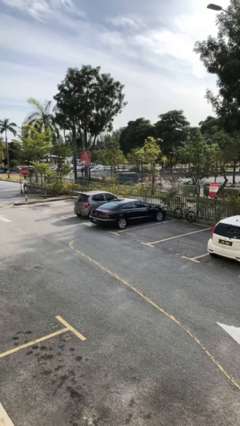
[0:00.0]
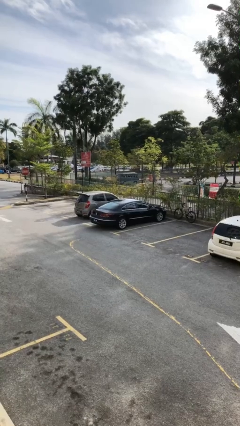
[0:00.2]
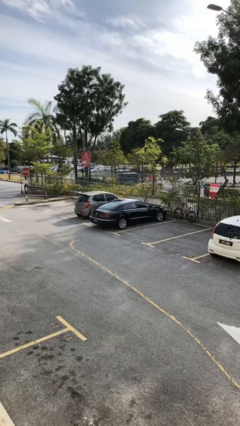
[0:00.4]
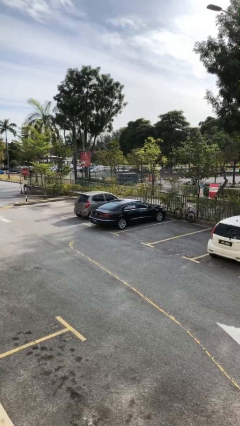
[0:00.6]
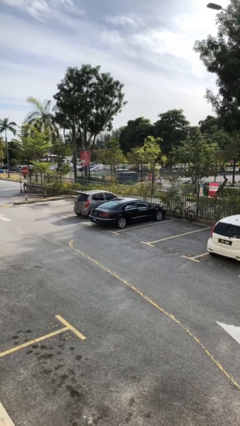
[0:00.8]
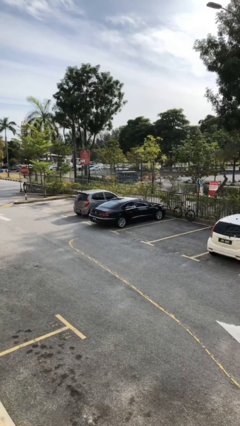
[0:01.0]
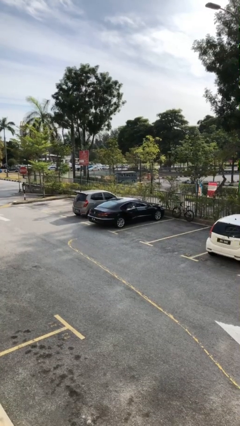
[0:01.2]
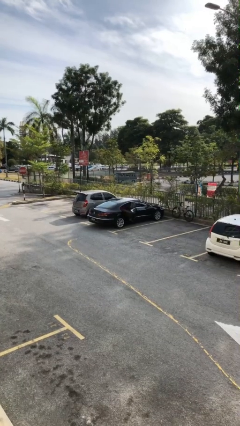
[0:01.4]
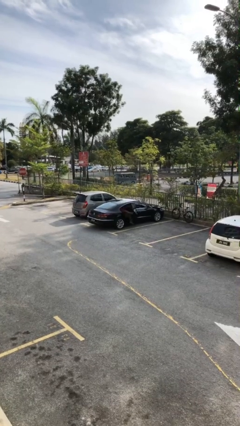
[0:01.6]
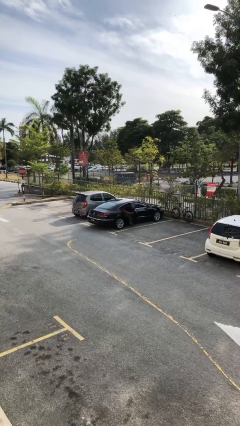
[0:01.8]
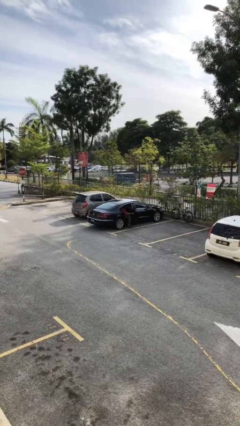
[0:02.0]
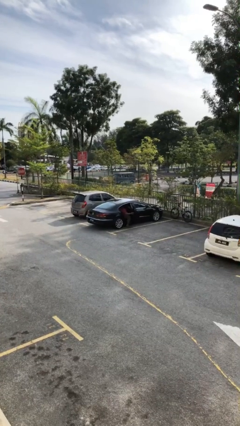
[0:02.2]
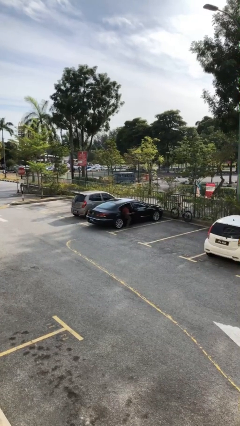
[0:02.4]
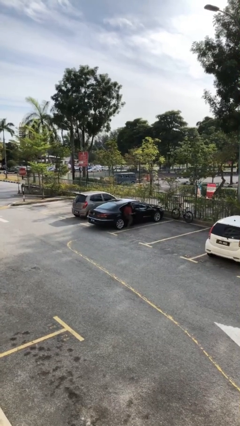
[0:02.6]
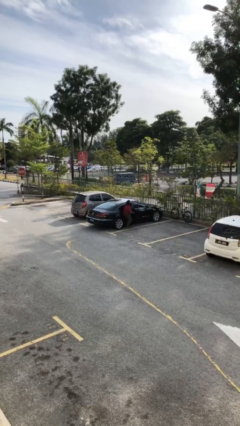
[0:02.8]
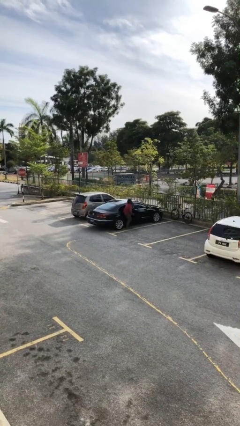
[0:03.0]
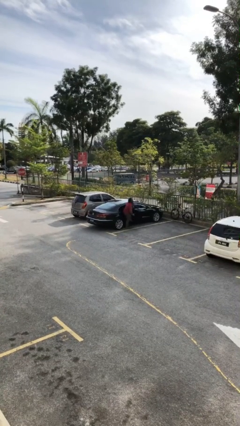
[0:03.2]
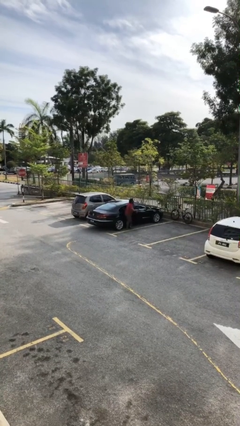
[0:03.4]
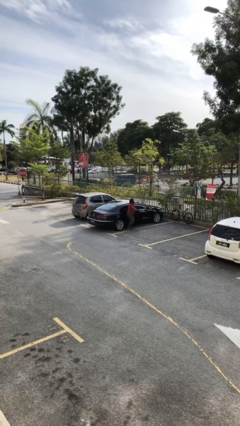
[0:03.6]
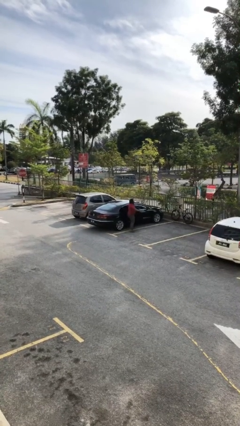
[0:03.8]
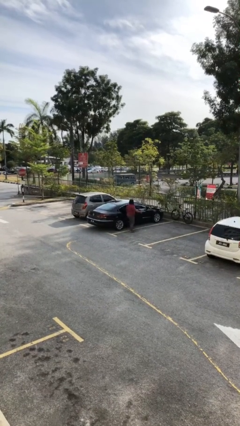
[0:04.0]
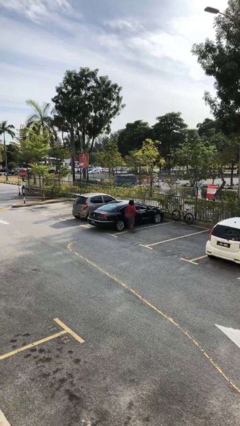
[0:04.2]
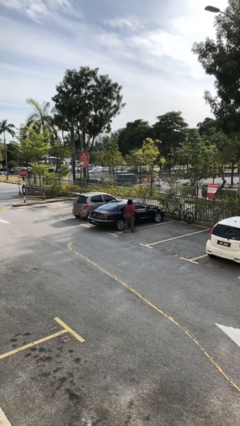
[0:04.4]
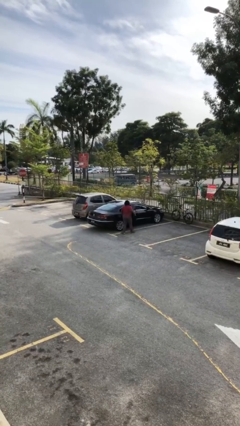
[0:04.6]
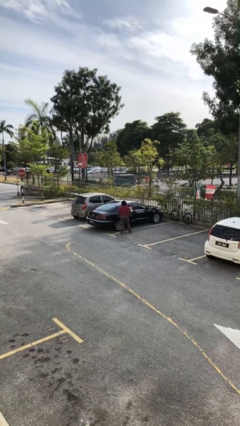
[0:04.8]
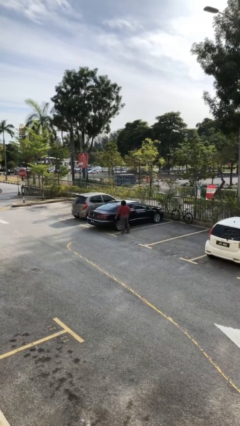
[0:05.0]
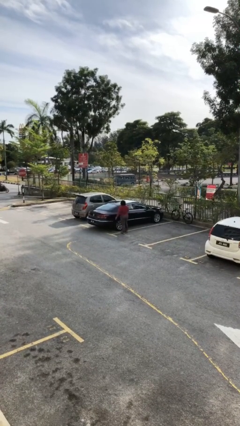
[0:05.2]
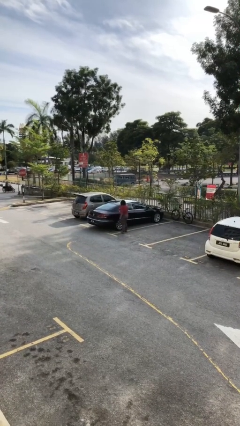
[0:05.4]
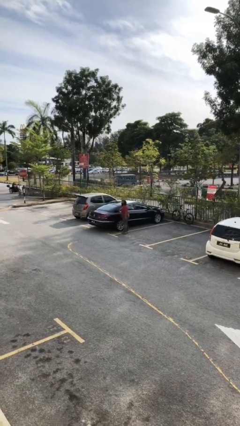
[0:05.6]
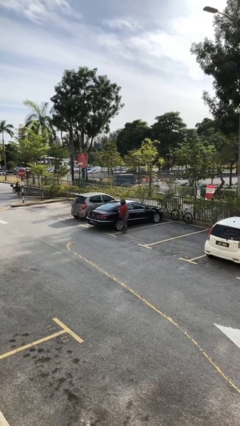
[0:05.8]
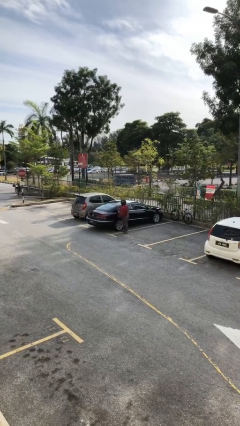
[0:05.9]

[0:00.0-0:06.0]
car drops off person

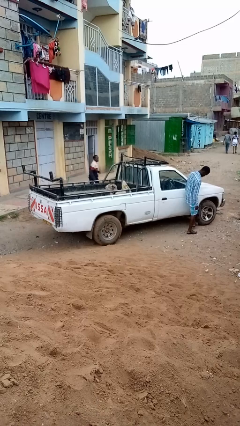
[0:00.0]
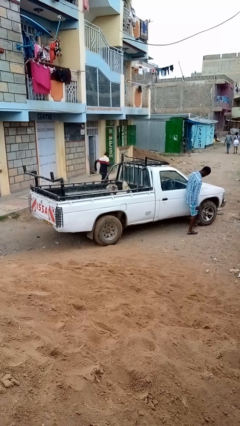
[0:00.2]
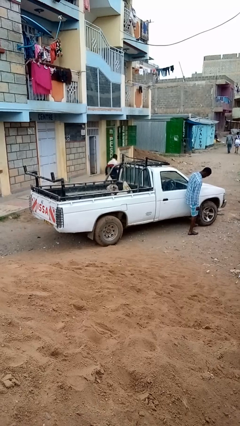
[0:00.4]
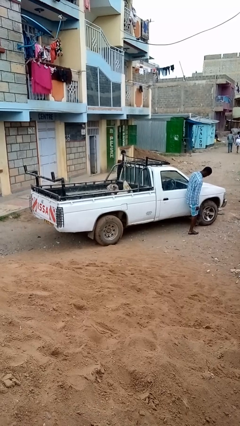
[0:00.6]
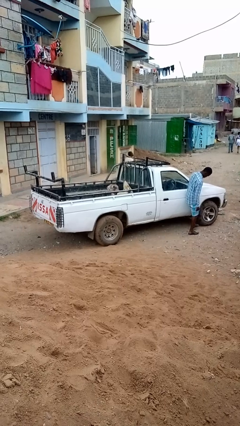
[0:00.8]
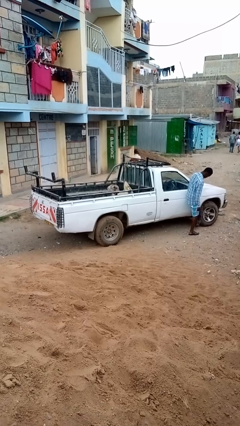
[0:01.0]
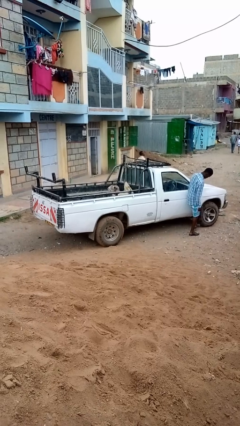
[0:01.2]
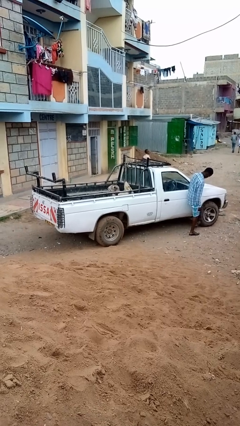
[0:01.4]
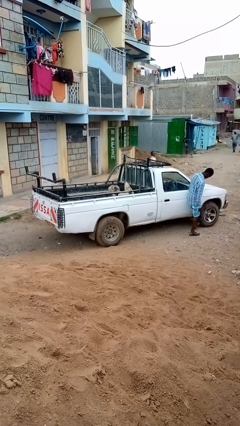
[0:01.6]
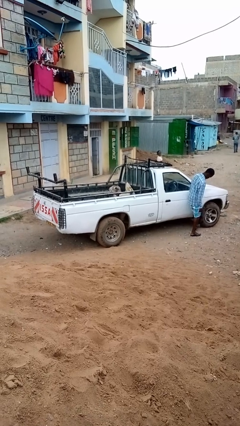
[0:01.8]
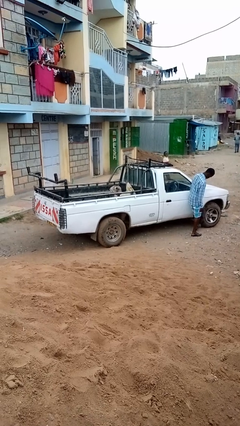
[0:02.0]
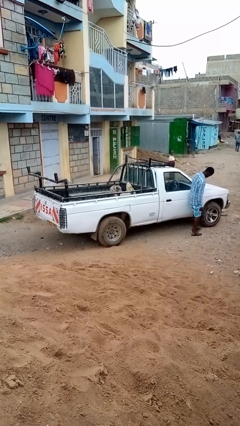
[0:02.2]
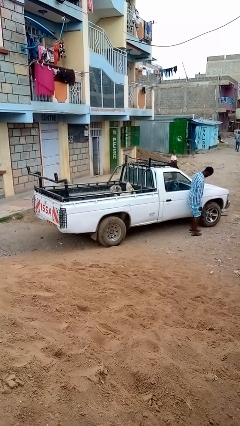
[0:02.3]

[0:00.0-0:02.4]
person kicks car tires

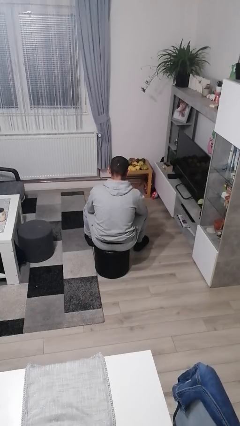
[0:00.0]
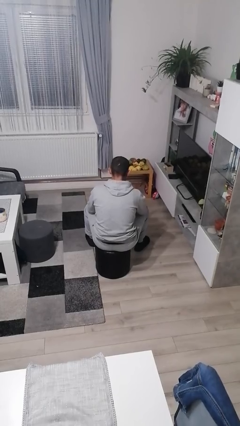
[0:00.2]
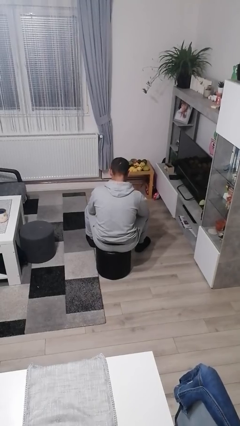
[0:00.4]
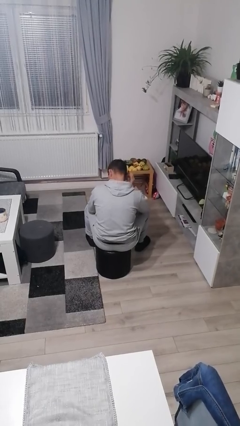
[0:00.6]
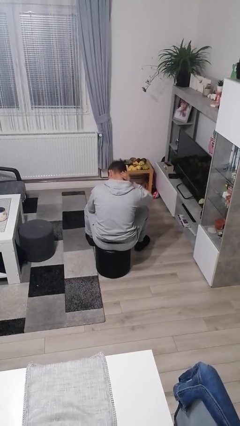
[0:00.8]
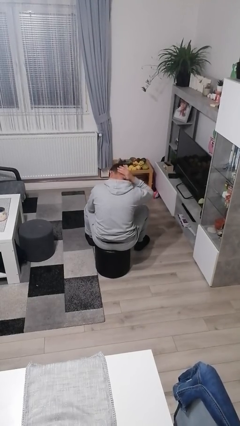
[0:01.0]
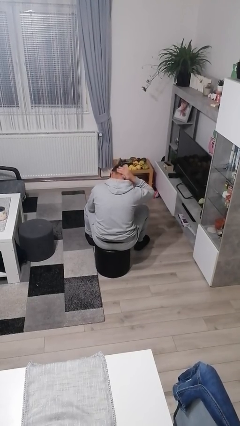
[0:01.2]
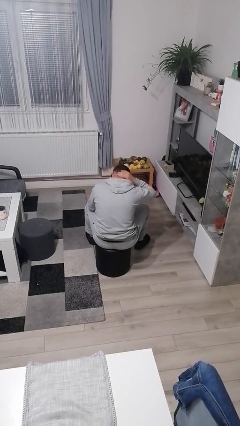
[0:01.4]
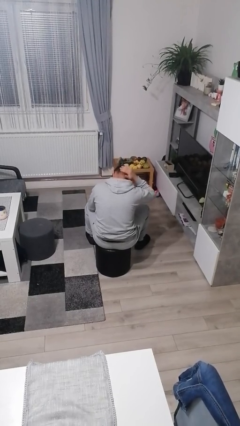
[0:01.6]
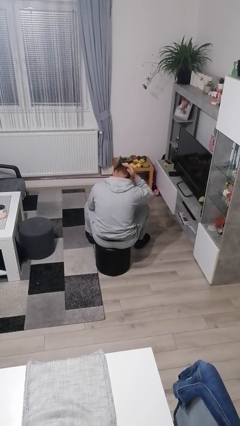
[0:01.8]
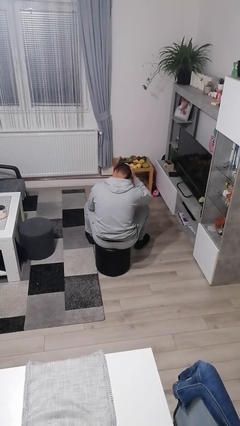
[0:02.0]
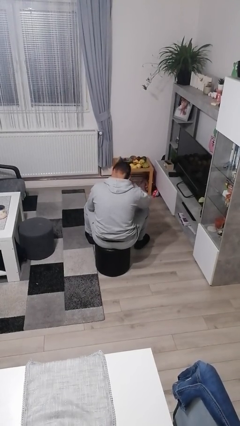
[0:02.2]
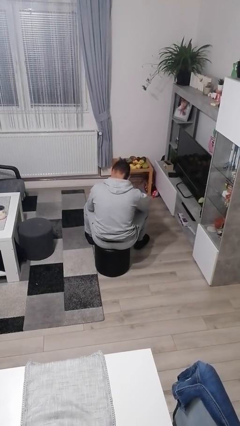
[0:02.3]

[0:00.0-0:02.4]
person strokes hair

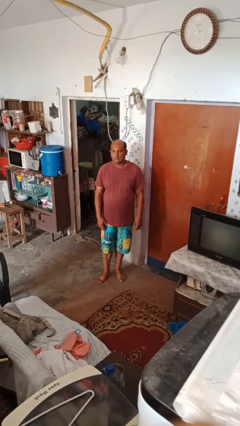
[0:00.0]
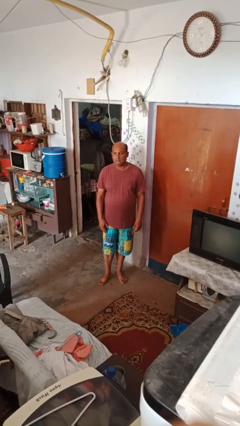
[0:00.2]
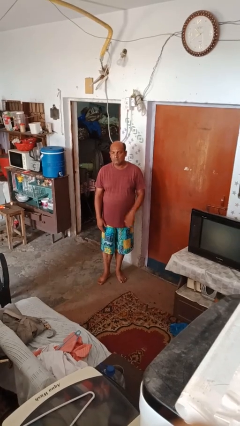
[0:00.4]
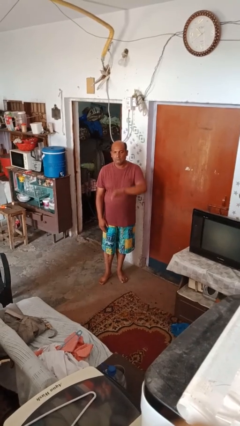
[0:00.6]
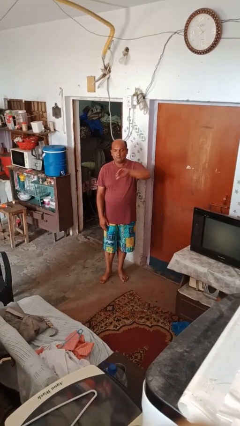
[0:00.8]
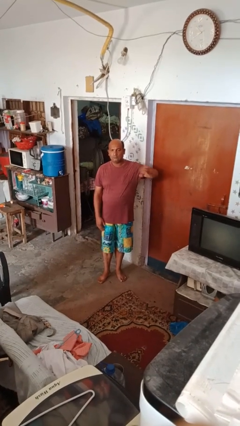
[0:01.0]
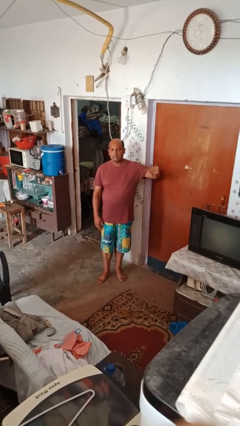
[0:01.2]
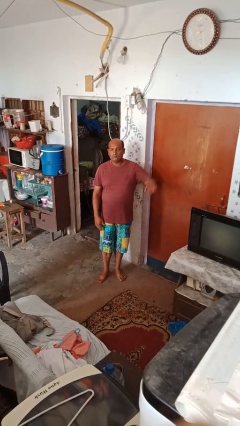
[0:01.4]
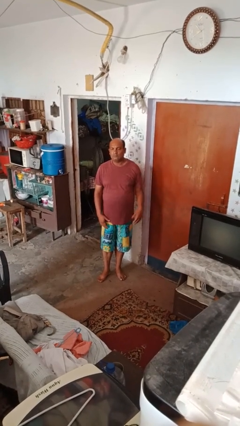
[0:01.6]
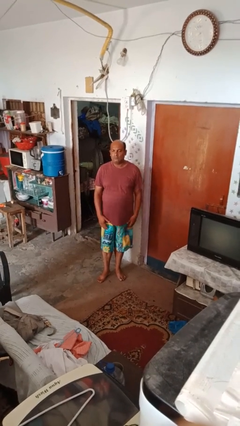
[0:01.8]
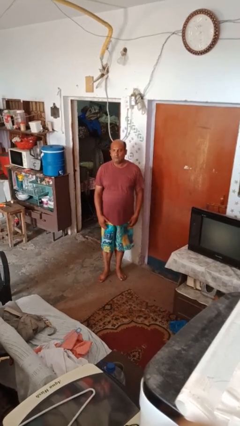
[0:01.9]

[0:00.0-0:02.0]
person gestures swipe right

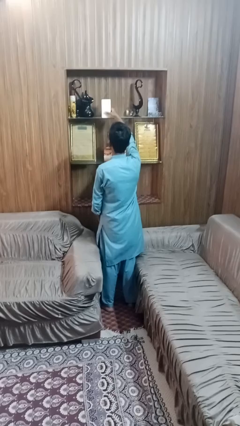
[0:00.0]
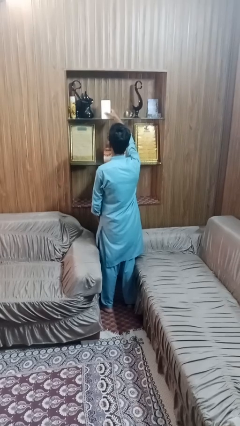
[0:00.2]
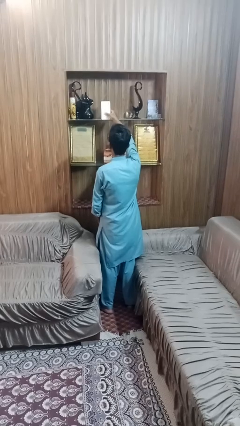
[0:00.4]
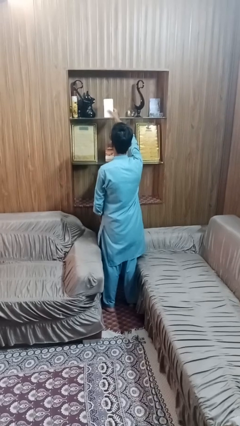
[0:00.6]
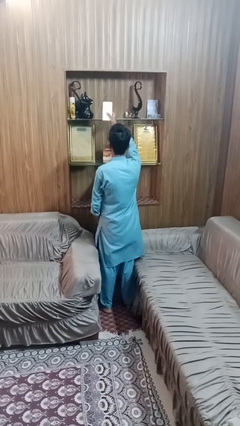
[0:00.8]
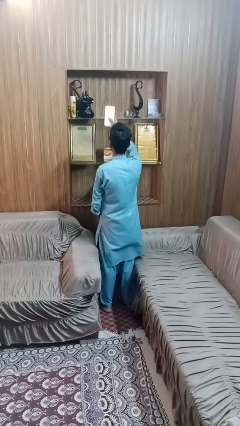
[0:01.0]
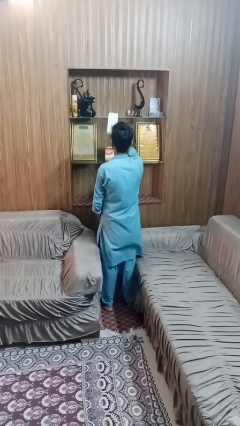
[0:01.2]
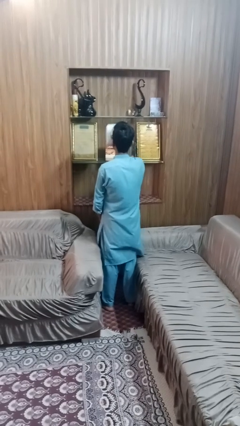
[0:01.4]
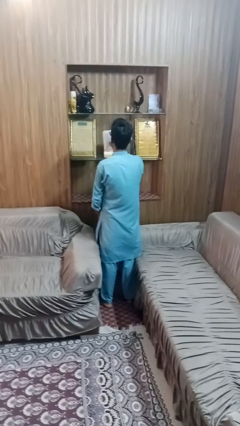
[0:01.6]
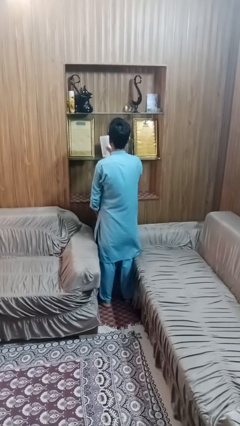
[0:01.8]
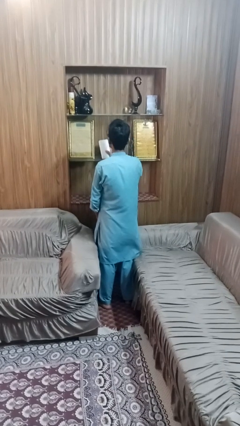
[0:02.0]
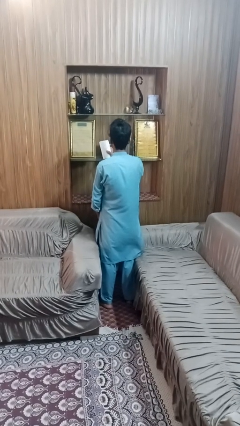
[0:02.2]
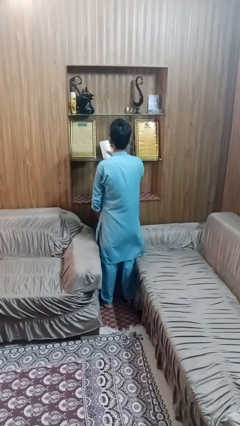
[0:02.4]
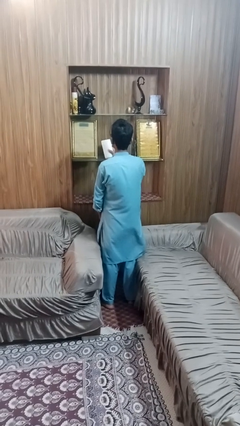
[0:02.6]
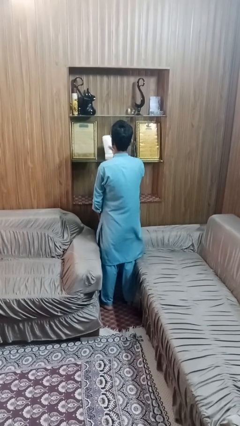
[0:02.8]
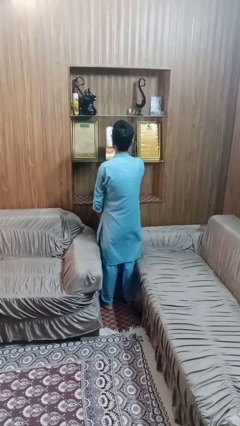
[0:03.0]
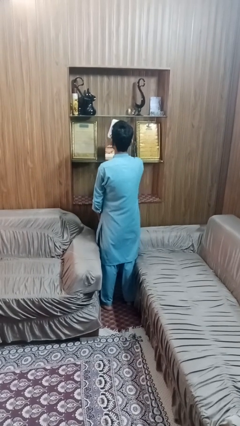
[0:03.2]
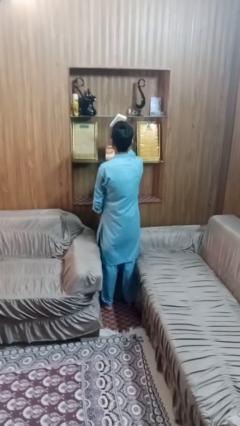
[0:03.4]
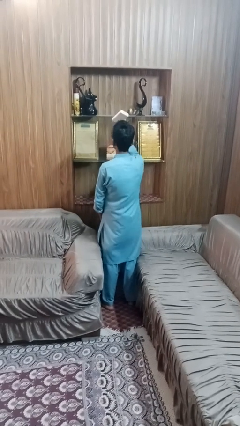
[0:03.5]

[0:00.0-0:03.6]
person picks up object from shelf

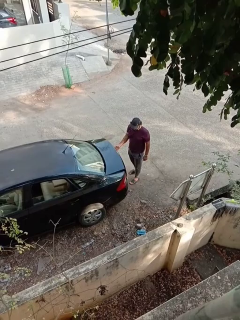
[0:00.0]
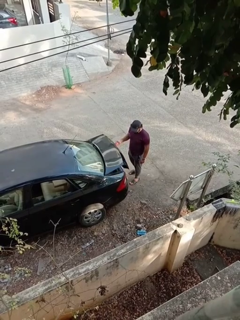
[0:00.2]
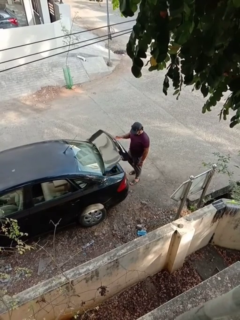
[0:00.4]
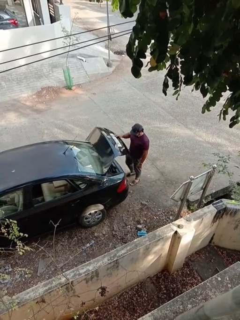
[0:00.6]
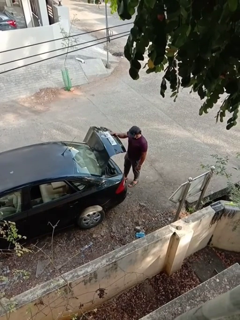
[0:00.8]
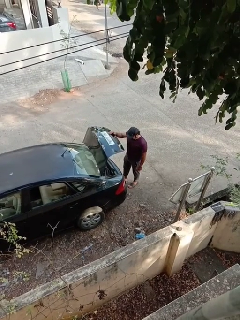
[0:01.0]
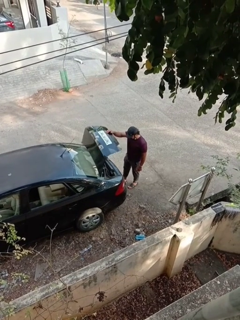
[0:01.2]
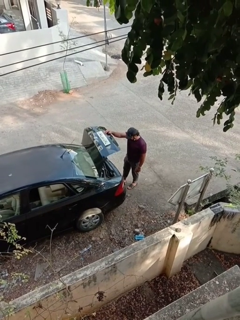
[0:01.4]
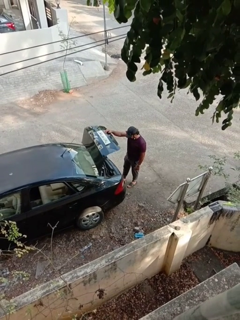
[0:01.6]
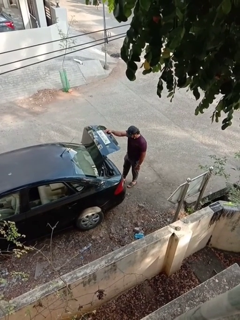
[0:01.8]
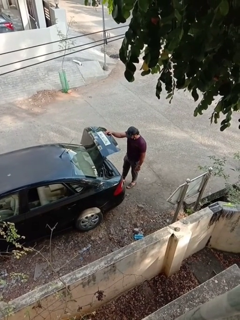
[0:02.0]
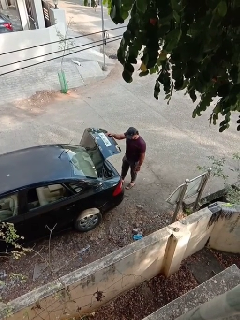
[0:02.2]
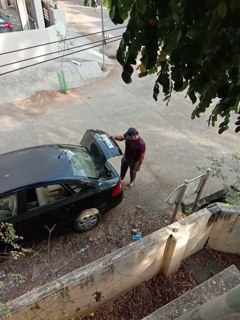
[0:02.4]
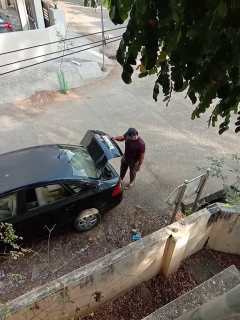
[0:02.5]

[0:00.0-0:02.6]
person opens car trunk
